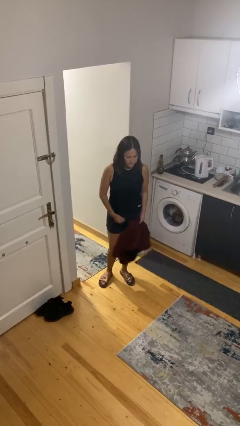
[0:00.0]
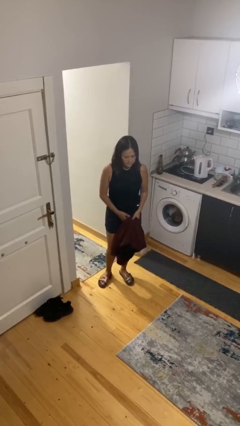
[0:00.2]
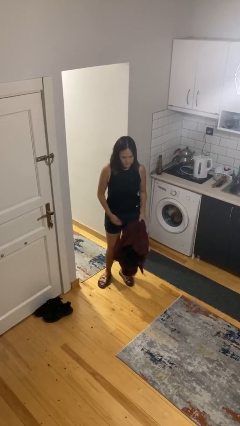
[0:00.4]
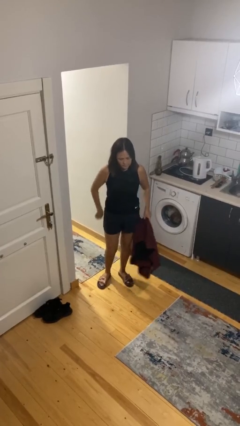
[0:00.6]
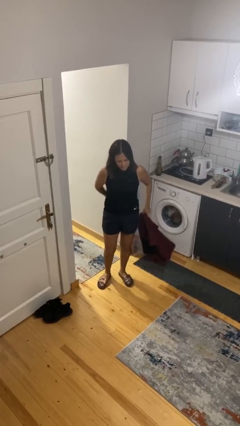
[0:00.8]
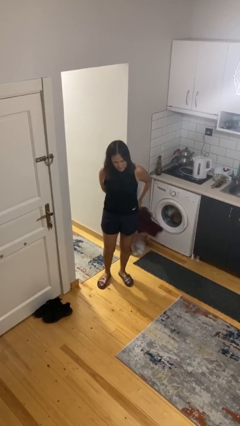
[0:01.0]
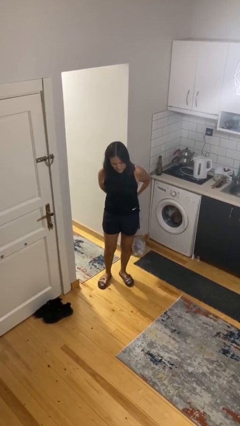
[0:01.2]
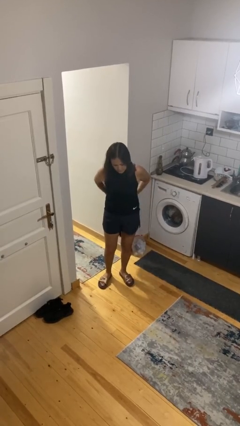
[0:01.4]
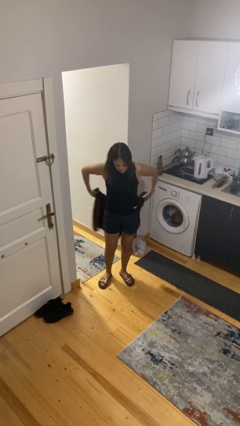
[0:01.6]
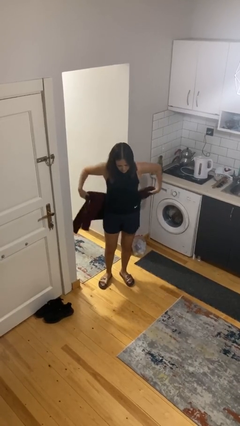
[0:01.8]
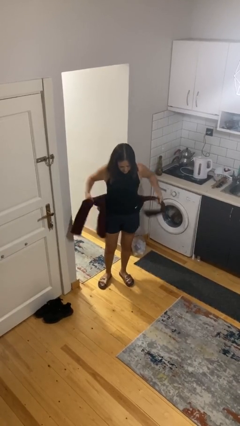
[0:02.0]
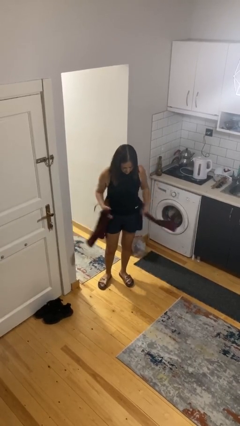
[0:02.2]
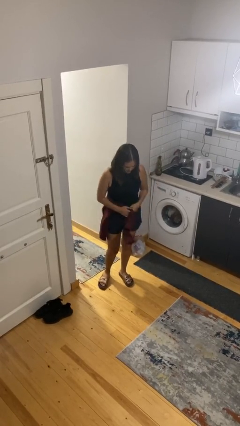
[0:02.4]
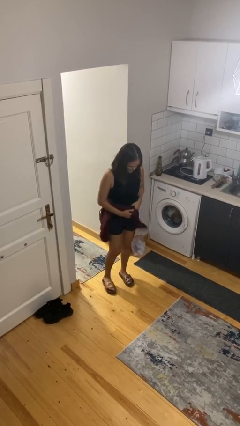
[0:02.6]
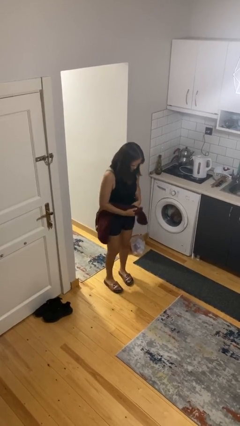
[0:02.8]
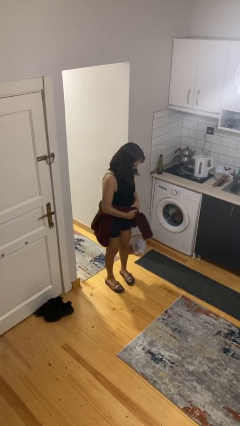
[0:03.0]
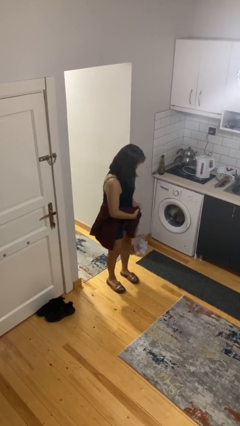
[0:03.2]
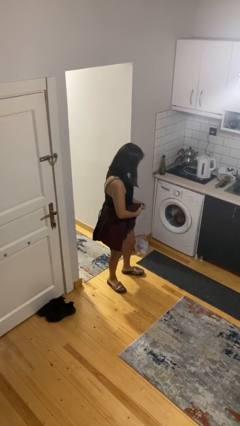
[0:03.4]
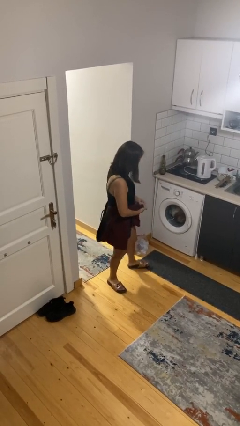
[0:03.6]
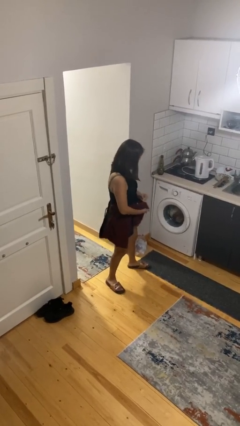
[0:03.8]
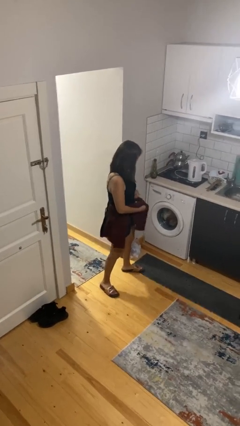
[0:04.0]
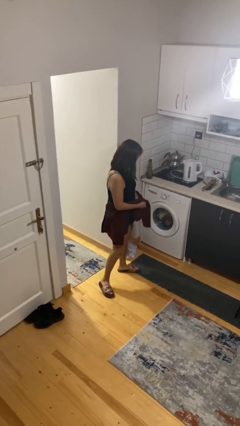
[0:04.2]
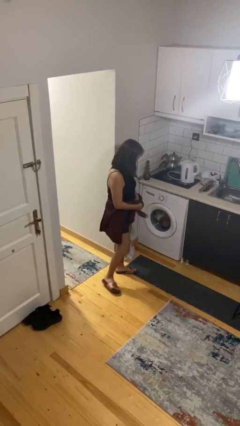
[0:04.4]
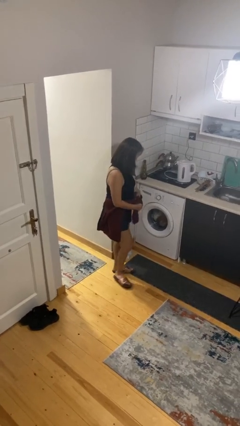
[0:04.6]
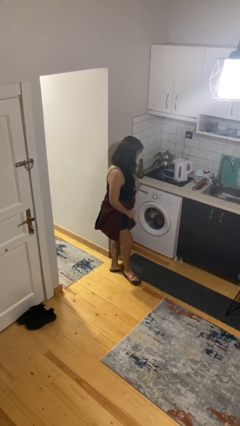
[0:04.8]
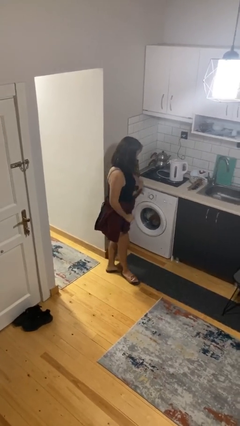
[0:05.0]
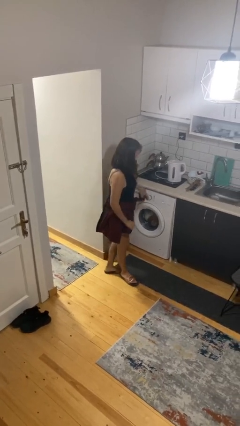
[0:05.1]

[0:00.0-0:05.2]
person ties jacket around waist

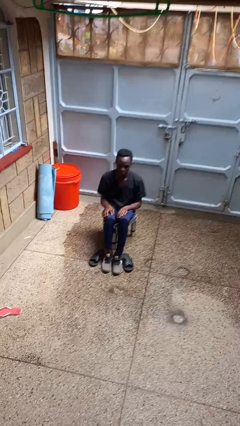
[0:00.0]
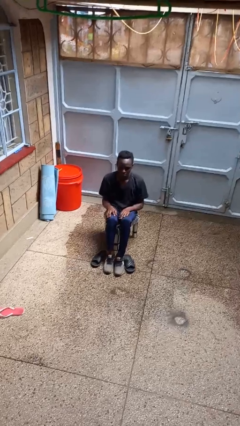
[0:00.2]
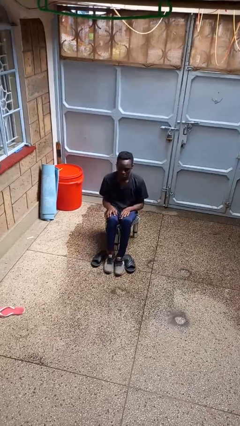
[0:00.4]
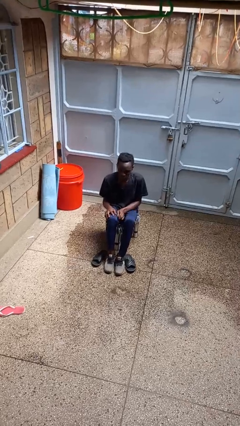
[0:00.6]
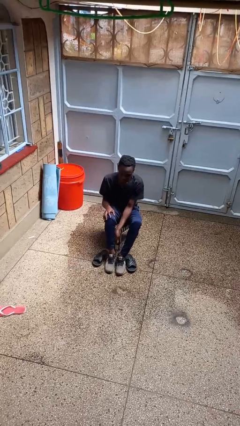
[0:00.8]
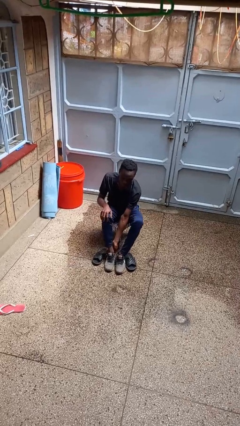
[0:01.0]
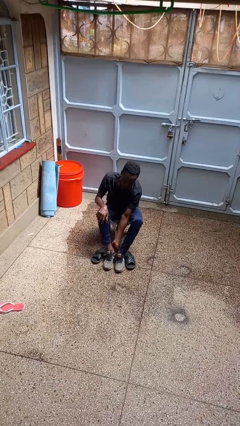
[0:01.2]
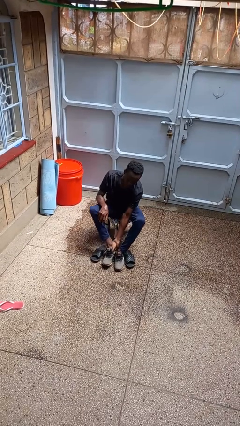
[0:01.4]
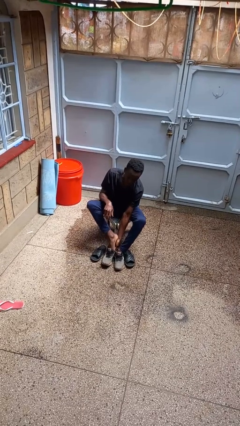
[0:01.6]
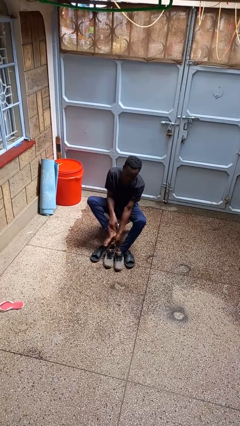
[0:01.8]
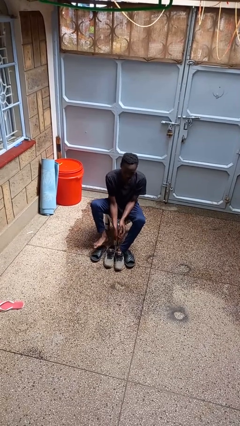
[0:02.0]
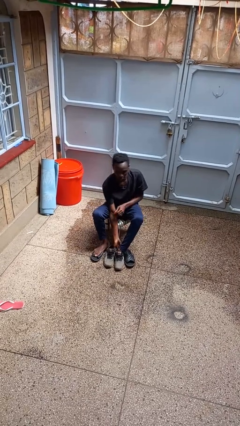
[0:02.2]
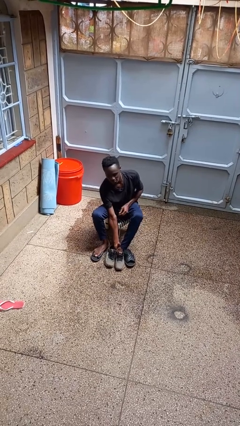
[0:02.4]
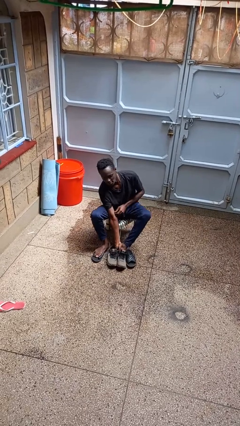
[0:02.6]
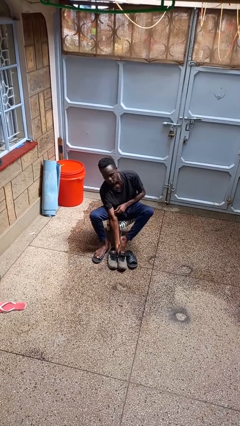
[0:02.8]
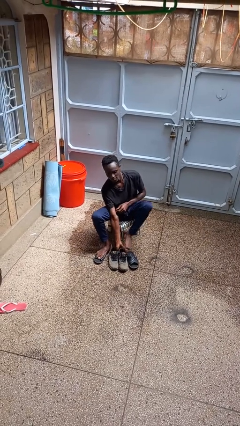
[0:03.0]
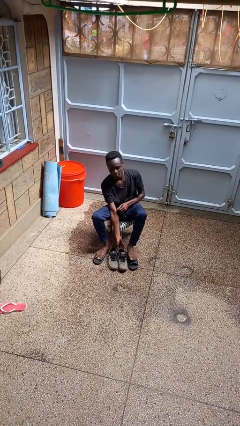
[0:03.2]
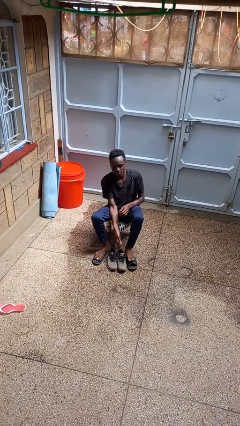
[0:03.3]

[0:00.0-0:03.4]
person takes off shoes

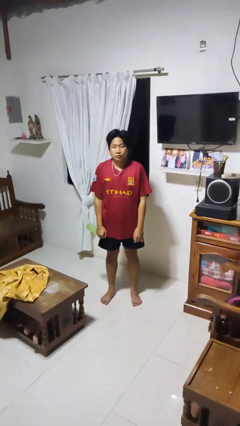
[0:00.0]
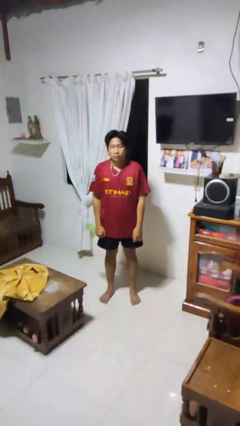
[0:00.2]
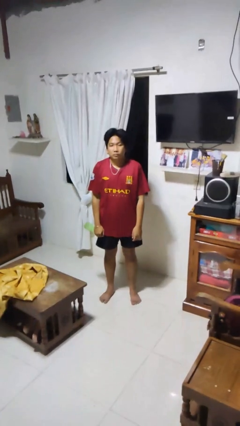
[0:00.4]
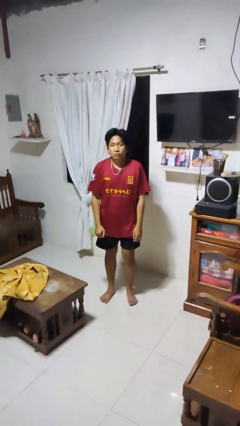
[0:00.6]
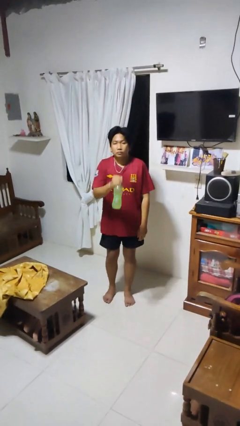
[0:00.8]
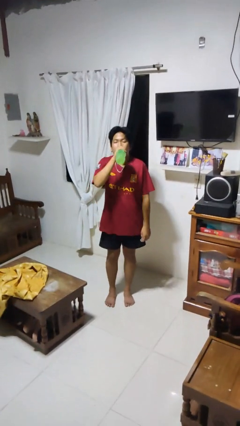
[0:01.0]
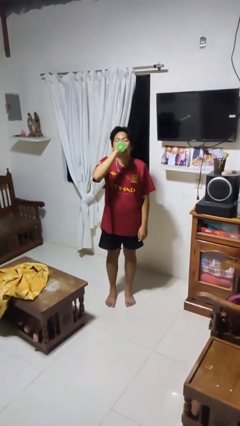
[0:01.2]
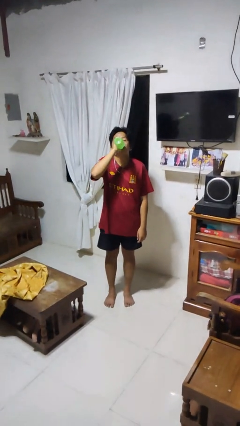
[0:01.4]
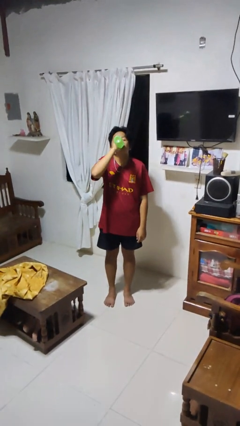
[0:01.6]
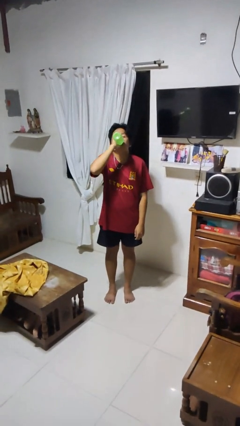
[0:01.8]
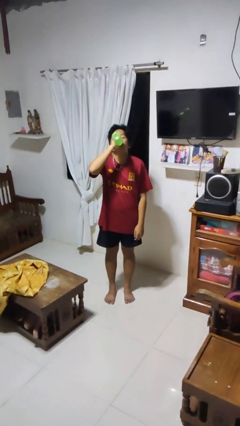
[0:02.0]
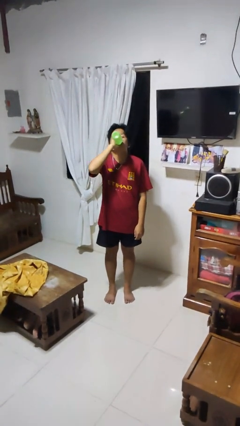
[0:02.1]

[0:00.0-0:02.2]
person drinks from bottle

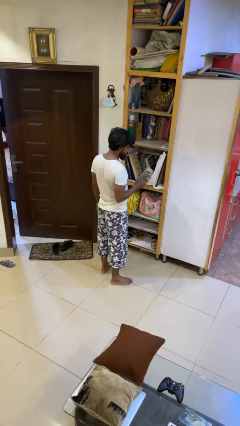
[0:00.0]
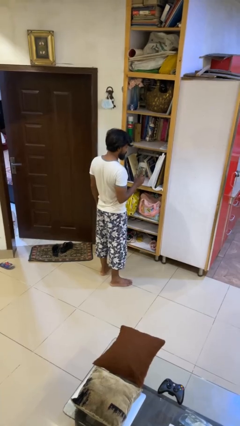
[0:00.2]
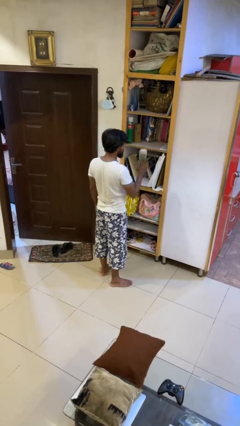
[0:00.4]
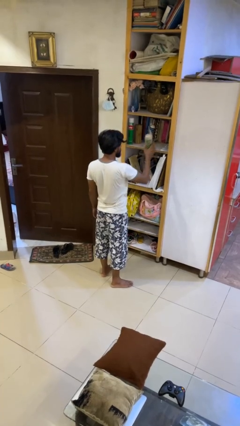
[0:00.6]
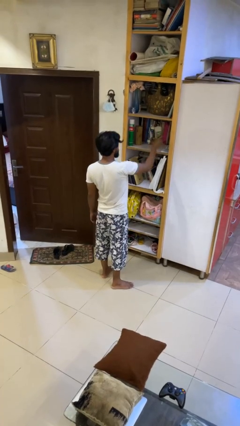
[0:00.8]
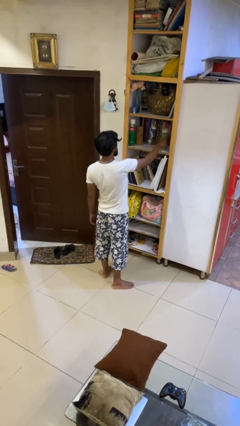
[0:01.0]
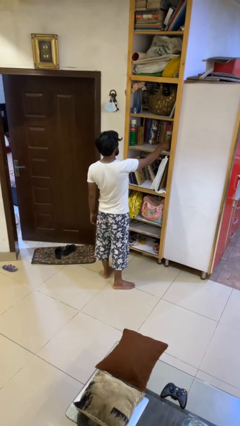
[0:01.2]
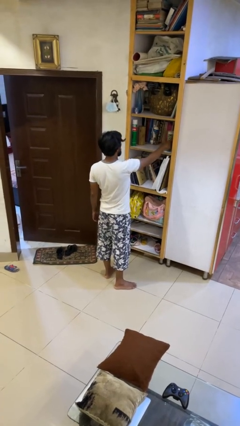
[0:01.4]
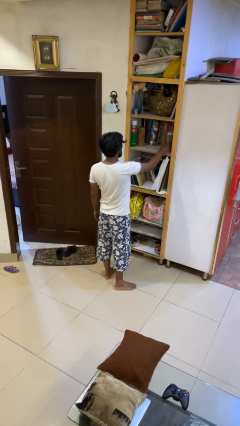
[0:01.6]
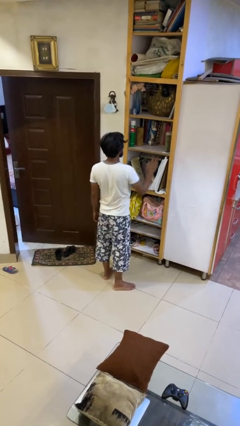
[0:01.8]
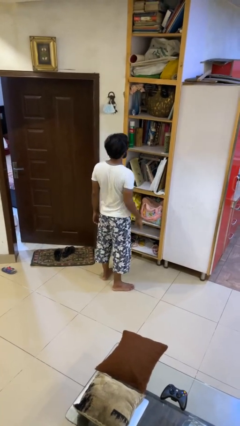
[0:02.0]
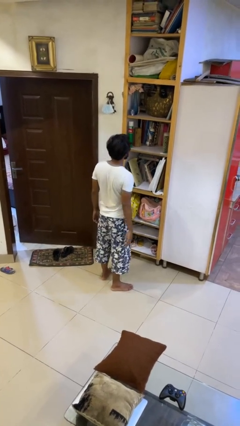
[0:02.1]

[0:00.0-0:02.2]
person puts down object into cabinet

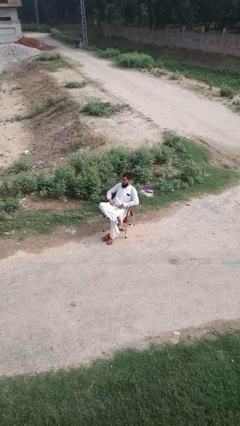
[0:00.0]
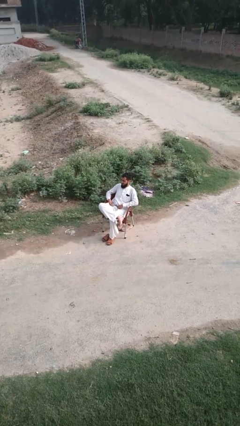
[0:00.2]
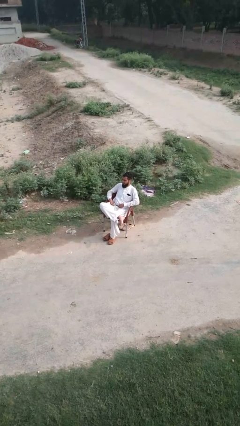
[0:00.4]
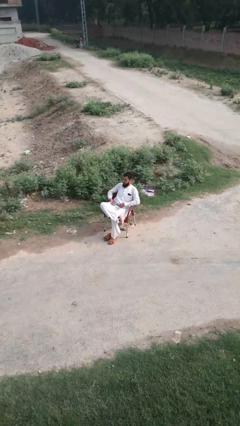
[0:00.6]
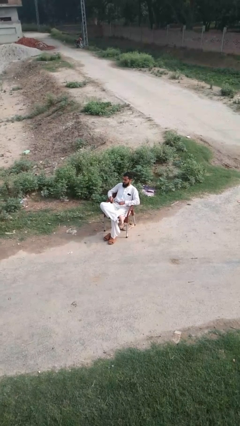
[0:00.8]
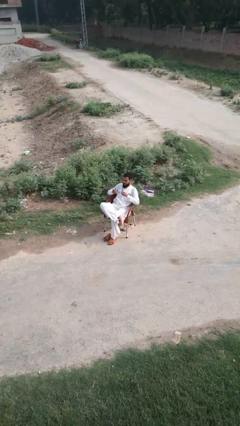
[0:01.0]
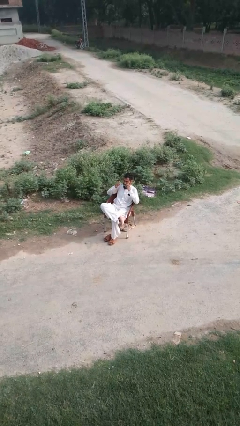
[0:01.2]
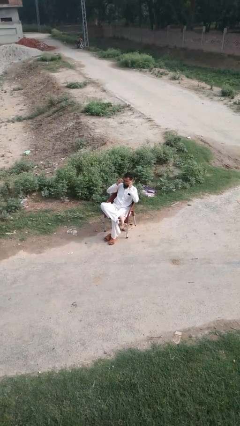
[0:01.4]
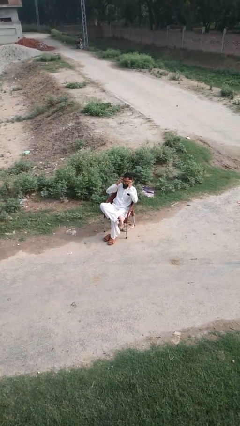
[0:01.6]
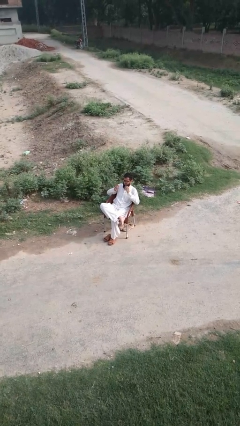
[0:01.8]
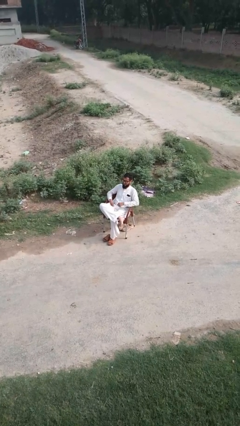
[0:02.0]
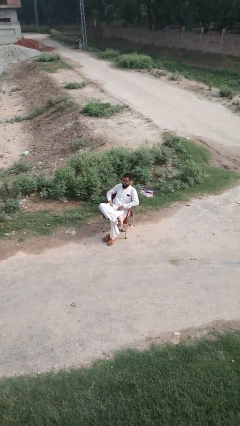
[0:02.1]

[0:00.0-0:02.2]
person puts on glasses

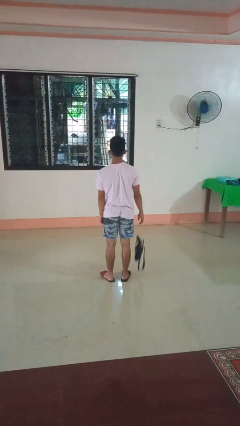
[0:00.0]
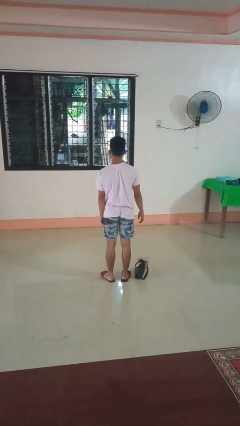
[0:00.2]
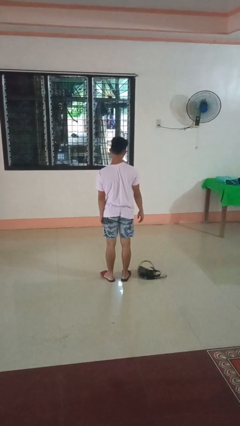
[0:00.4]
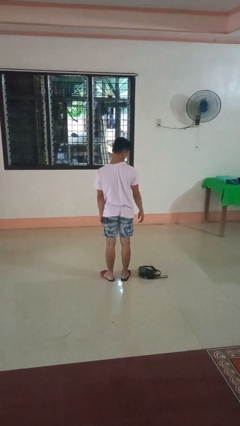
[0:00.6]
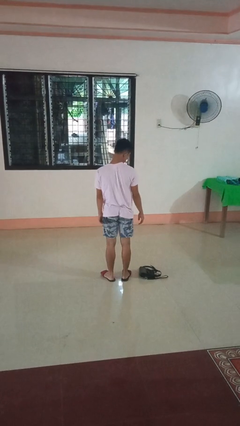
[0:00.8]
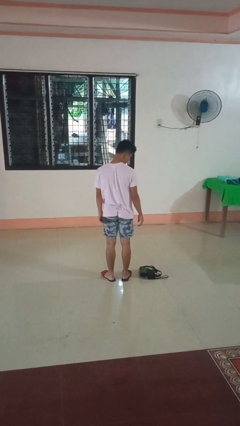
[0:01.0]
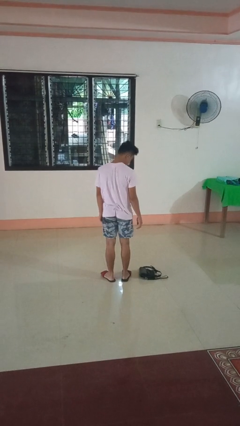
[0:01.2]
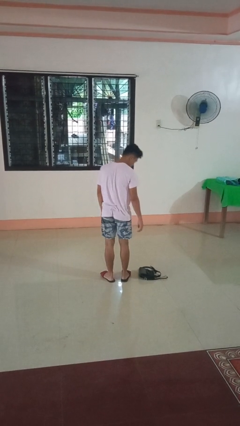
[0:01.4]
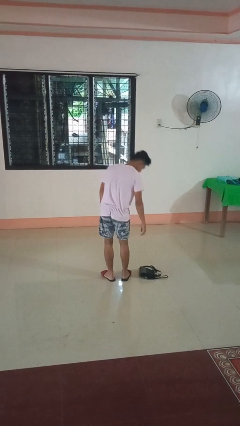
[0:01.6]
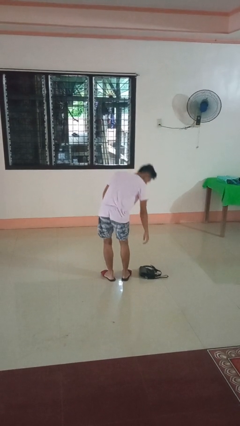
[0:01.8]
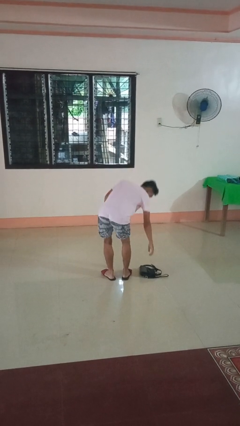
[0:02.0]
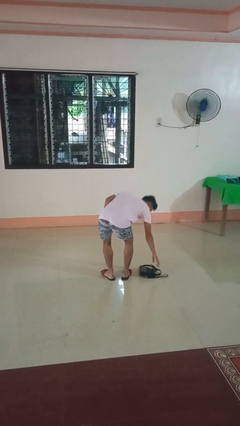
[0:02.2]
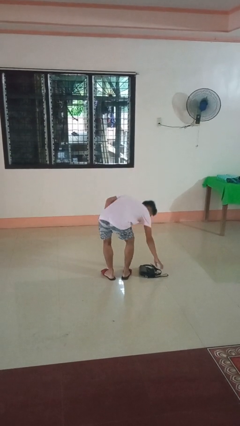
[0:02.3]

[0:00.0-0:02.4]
person drops object
